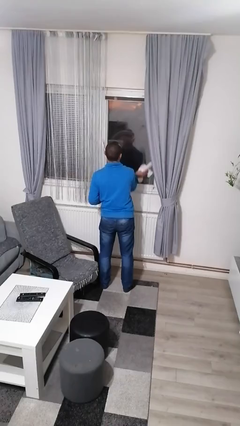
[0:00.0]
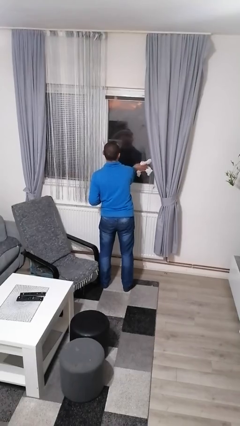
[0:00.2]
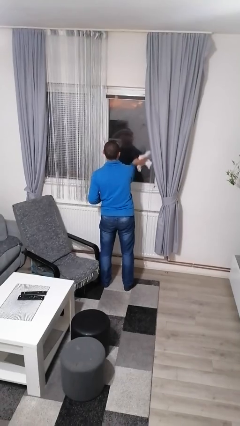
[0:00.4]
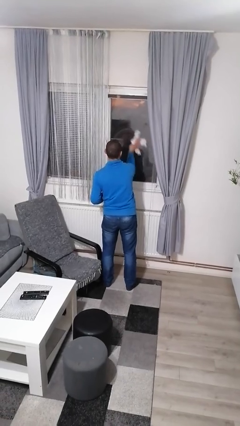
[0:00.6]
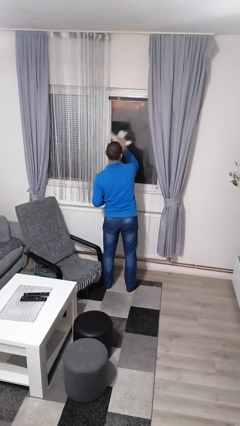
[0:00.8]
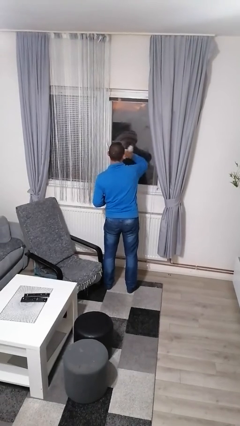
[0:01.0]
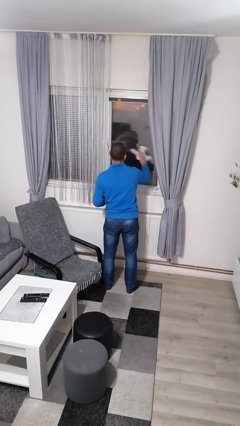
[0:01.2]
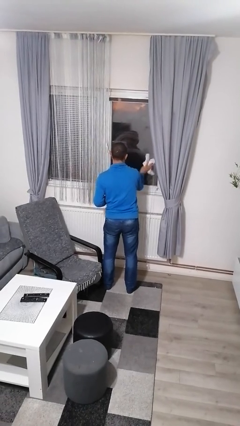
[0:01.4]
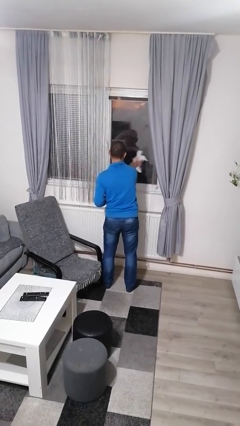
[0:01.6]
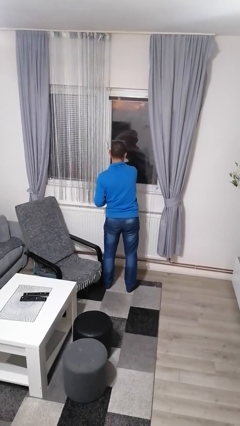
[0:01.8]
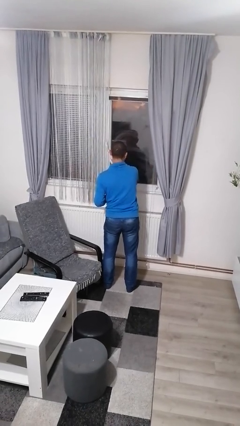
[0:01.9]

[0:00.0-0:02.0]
person washes window

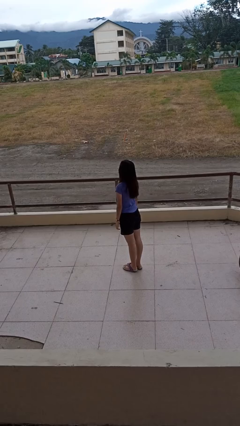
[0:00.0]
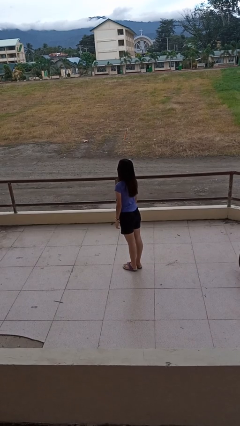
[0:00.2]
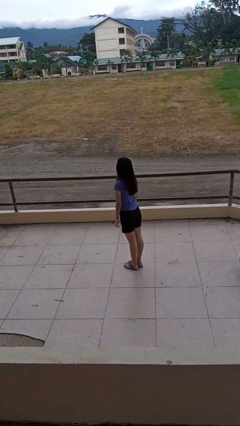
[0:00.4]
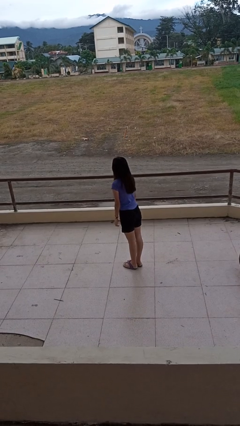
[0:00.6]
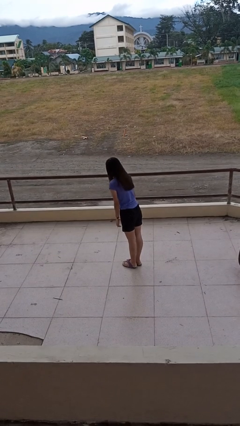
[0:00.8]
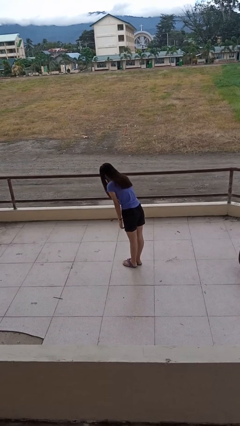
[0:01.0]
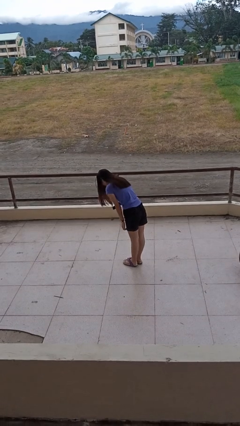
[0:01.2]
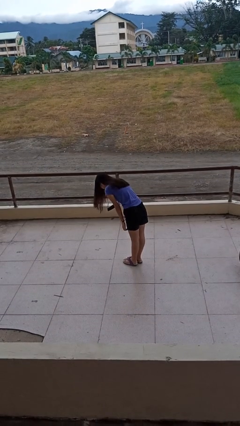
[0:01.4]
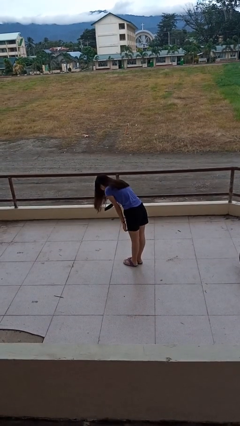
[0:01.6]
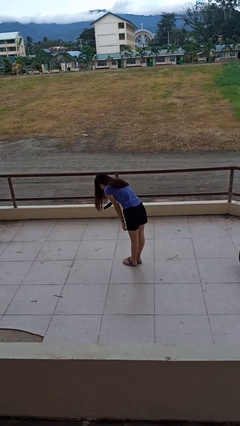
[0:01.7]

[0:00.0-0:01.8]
person bows

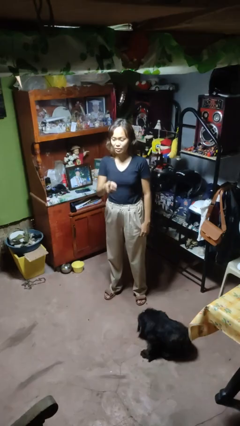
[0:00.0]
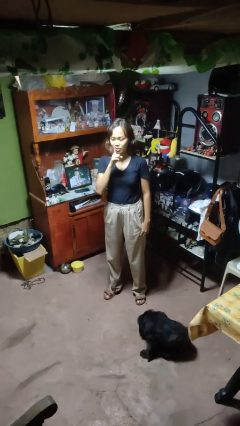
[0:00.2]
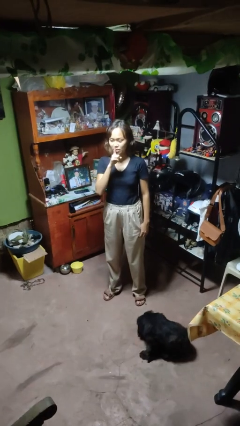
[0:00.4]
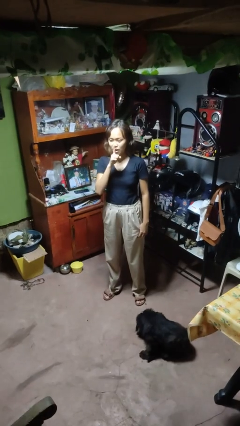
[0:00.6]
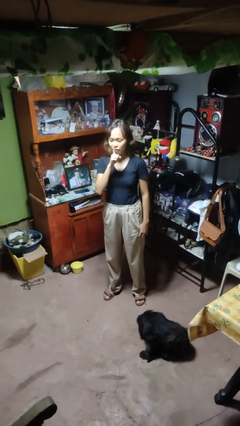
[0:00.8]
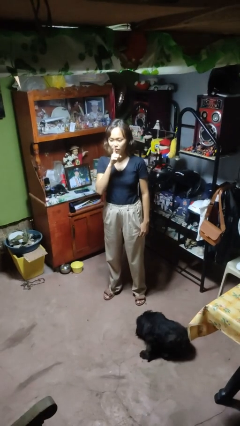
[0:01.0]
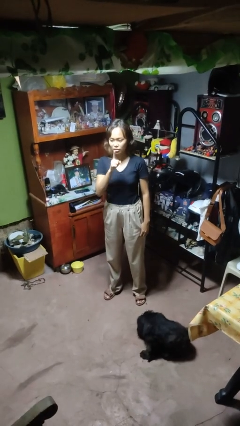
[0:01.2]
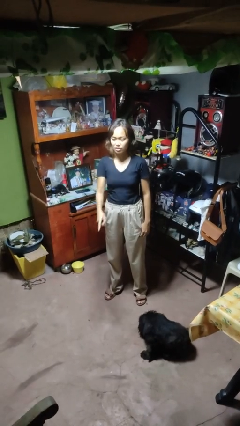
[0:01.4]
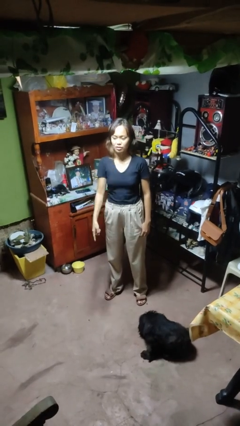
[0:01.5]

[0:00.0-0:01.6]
person gestures be quiet

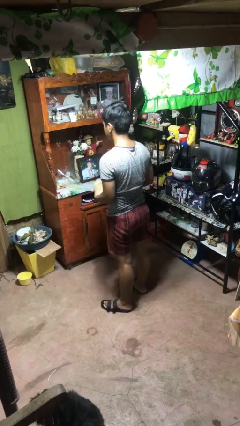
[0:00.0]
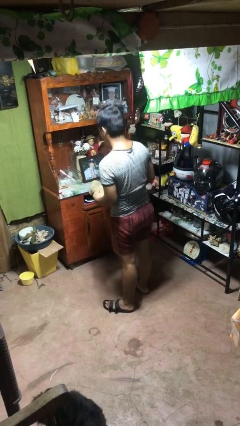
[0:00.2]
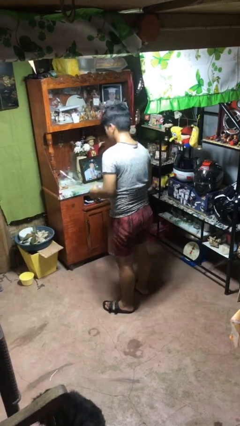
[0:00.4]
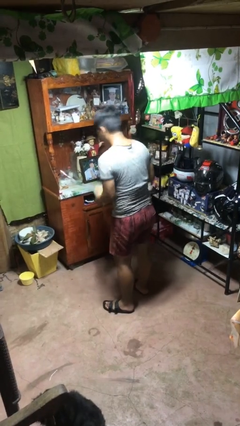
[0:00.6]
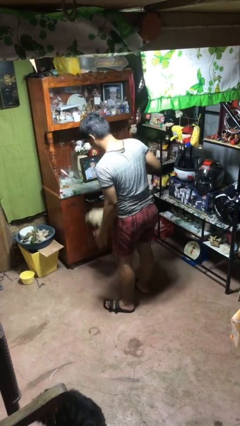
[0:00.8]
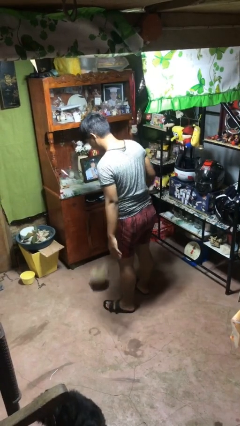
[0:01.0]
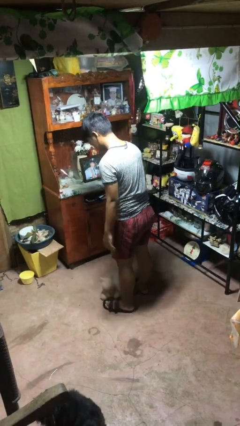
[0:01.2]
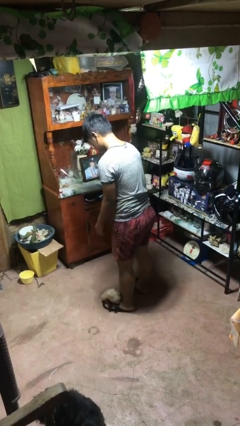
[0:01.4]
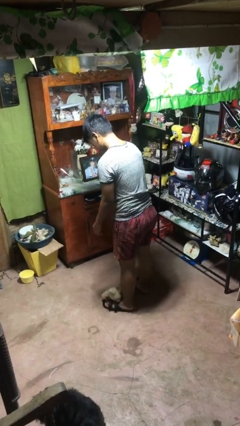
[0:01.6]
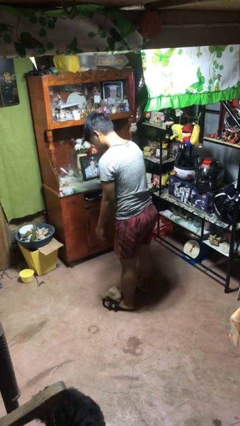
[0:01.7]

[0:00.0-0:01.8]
person drops object

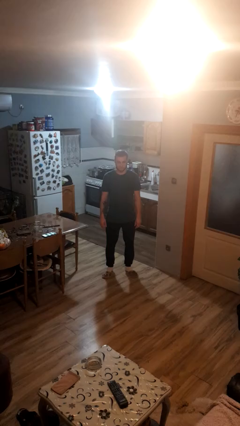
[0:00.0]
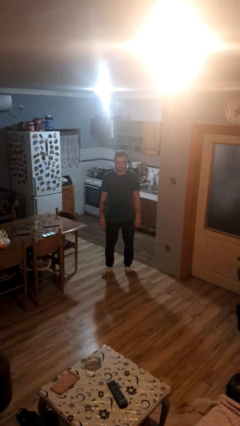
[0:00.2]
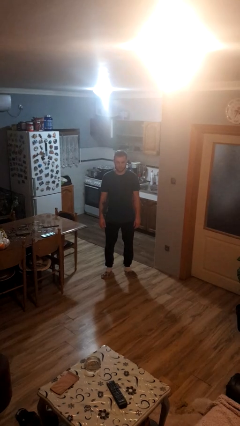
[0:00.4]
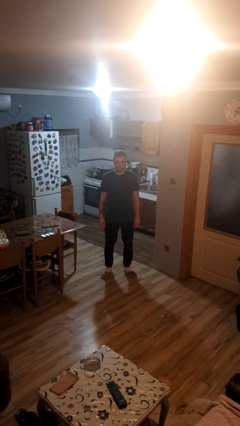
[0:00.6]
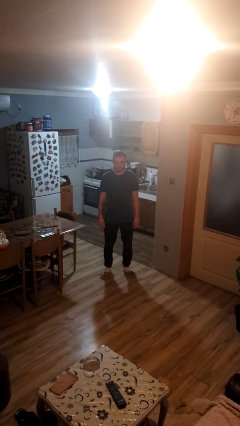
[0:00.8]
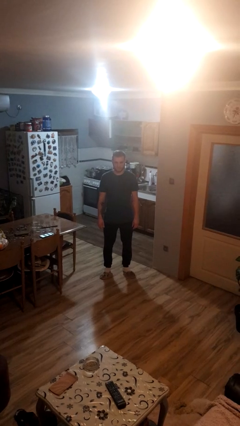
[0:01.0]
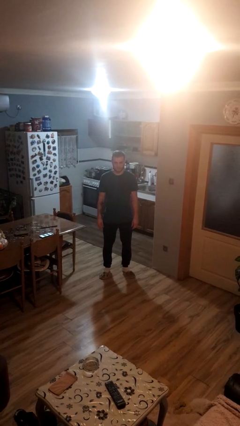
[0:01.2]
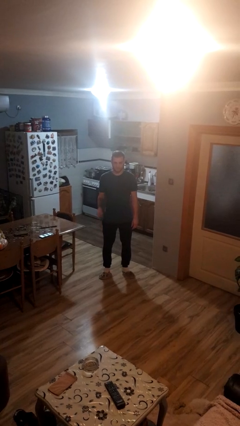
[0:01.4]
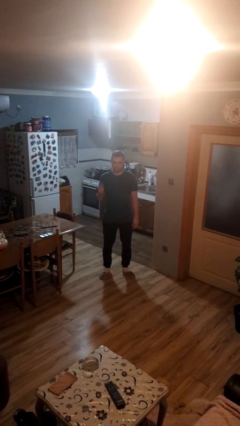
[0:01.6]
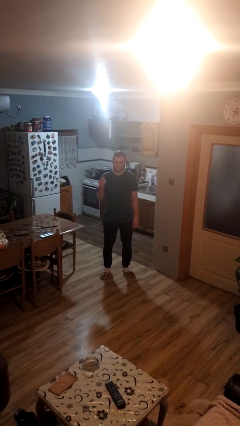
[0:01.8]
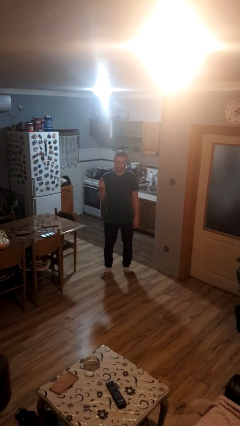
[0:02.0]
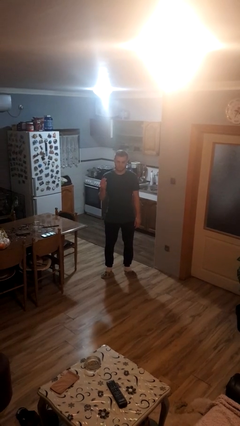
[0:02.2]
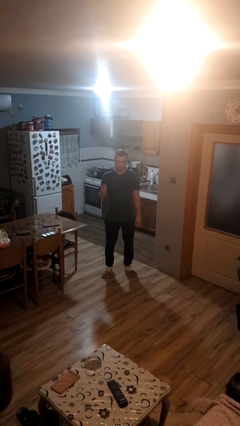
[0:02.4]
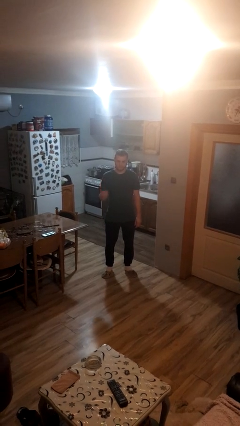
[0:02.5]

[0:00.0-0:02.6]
person snaps fingers

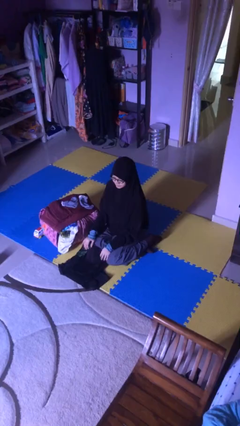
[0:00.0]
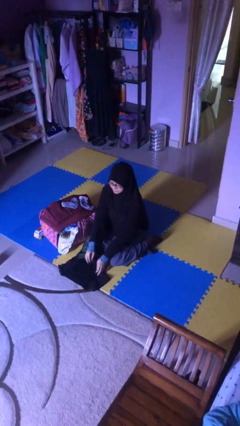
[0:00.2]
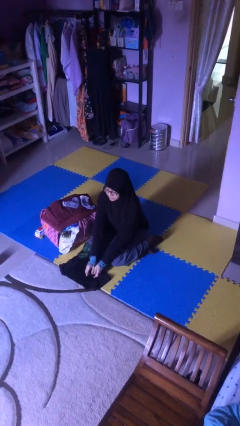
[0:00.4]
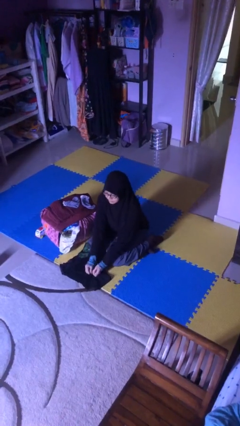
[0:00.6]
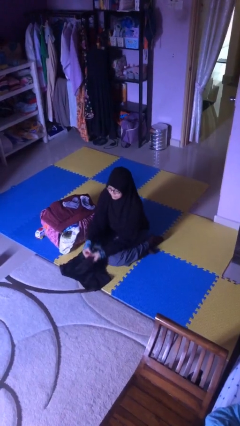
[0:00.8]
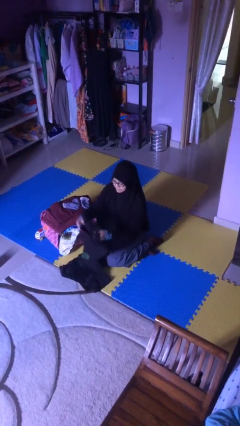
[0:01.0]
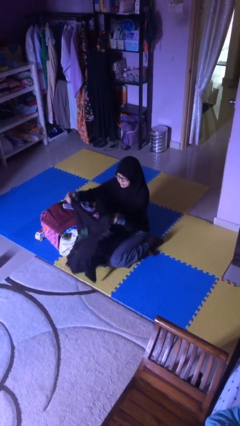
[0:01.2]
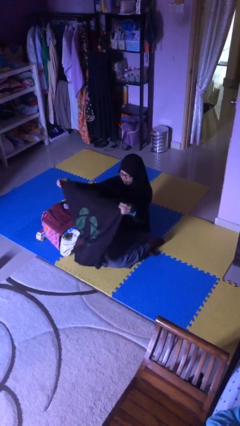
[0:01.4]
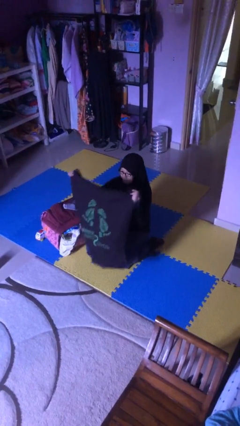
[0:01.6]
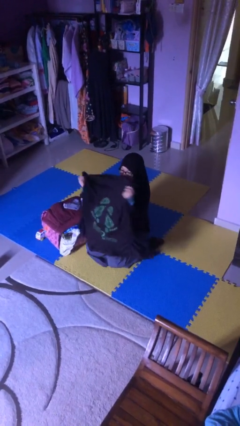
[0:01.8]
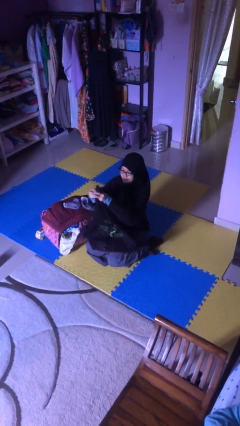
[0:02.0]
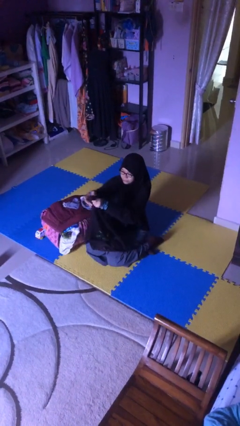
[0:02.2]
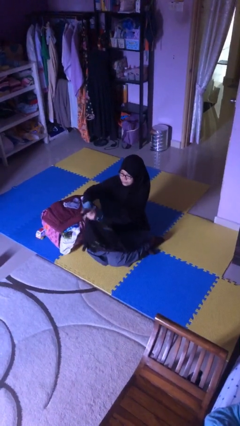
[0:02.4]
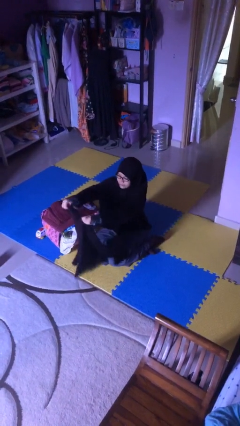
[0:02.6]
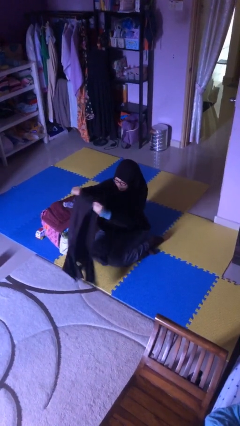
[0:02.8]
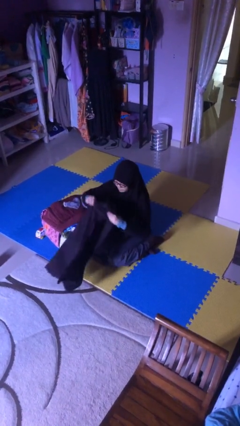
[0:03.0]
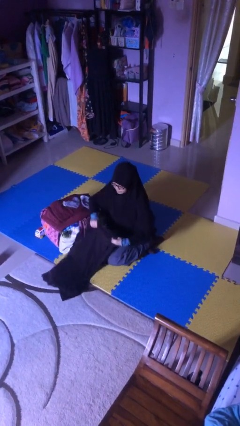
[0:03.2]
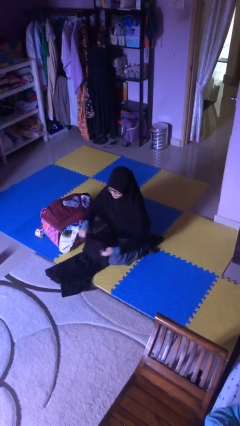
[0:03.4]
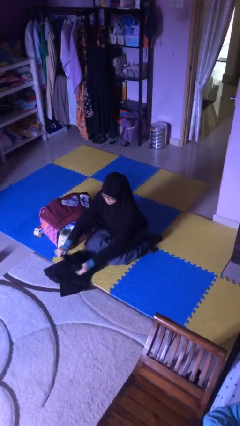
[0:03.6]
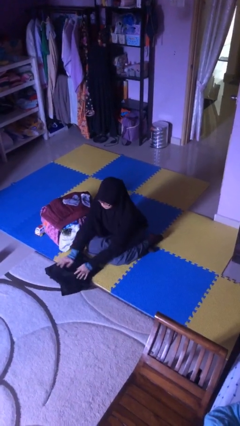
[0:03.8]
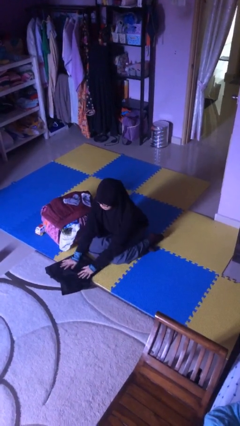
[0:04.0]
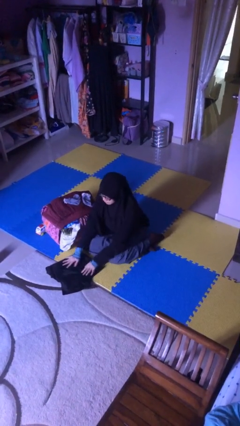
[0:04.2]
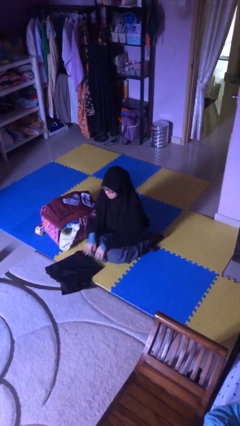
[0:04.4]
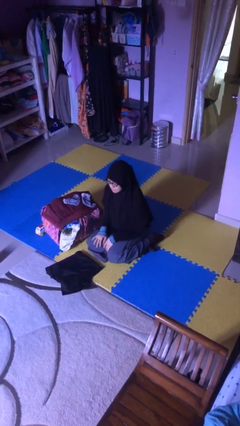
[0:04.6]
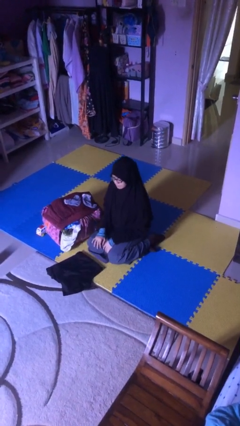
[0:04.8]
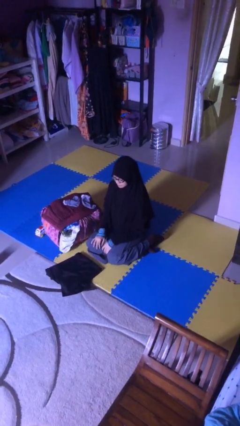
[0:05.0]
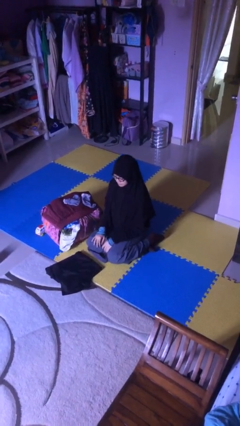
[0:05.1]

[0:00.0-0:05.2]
person folds shirt

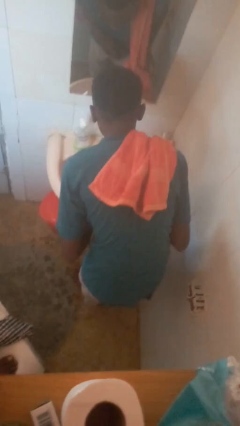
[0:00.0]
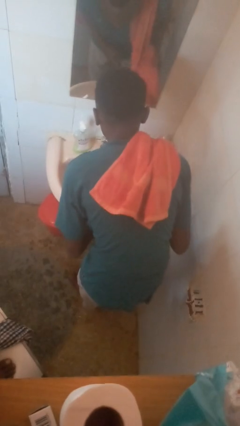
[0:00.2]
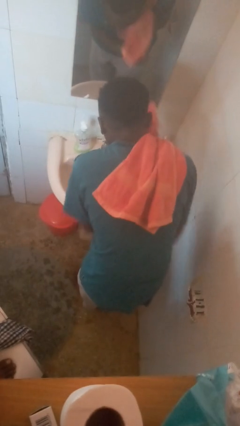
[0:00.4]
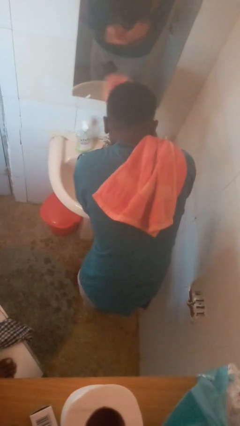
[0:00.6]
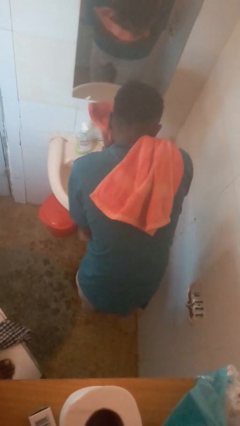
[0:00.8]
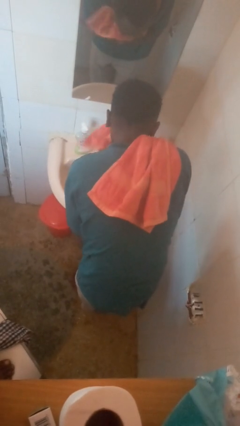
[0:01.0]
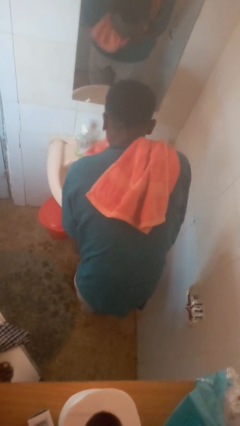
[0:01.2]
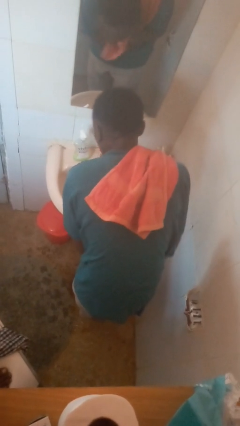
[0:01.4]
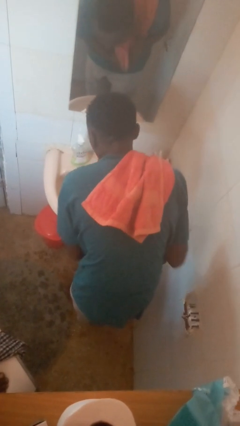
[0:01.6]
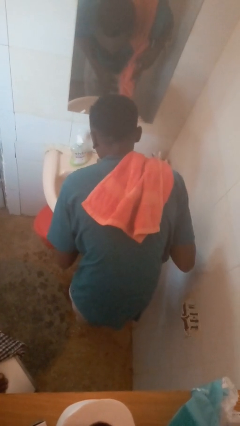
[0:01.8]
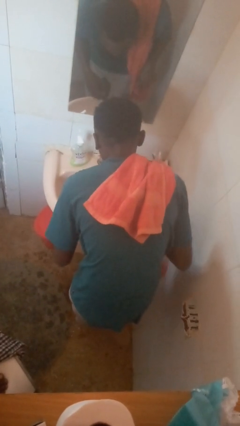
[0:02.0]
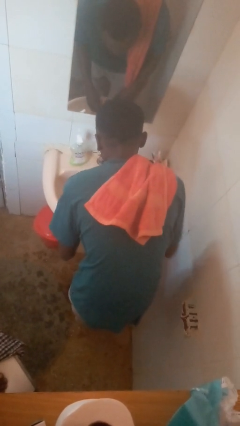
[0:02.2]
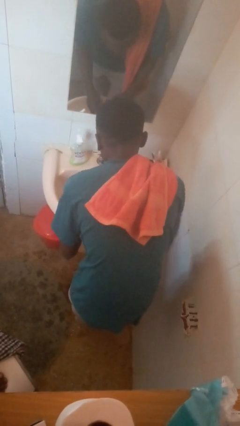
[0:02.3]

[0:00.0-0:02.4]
person dries face with towel

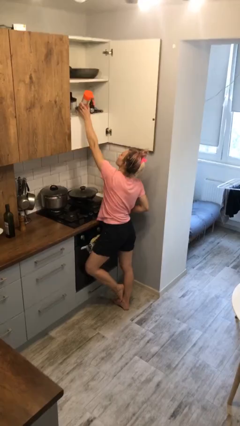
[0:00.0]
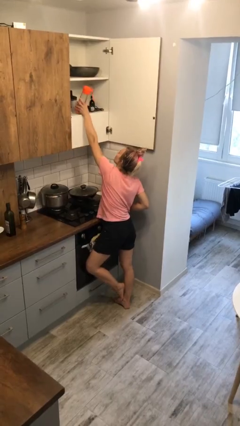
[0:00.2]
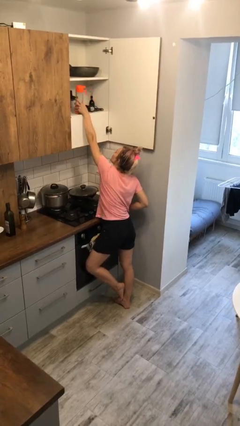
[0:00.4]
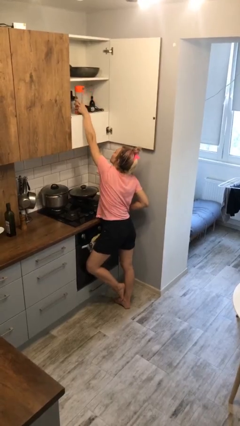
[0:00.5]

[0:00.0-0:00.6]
person puts down object into cabinet